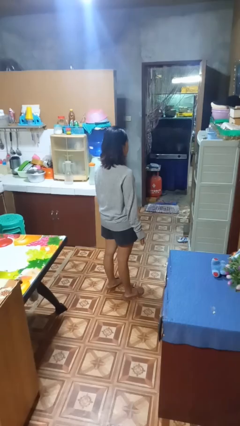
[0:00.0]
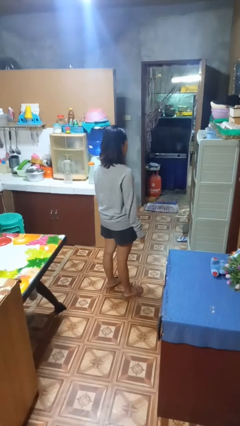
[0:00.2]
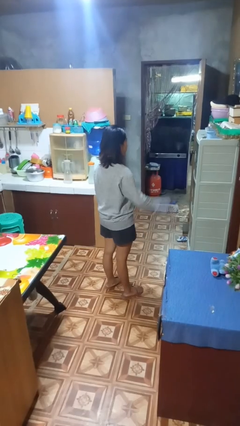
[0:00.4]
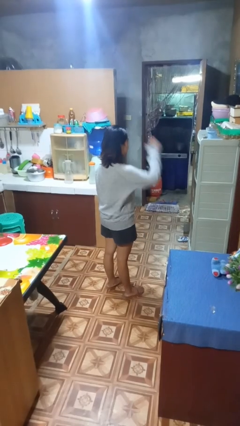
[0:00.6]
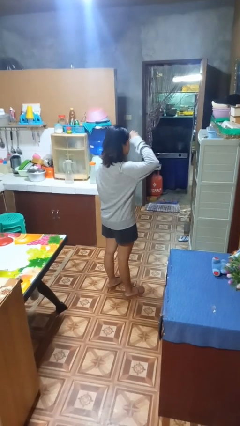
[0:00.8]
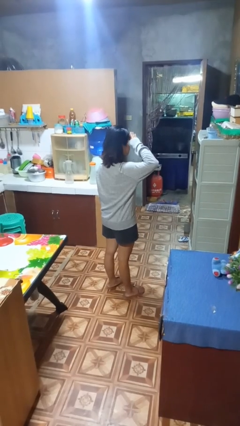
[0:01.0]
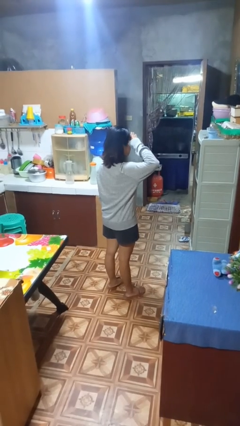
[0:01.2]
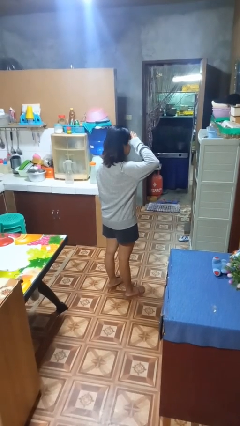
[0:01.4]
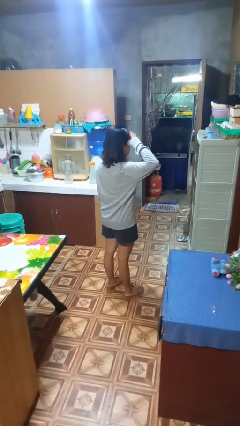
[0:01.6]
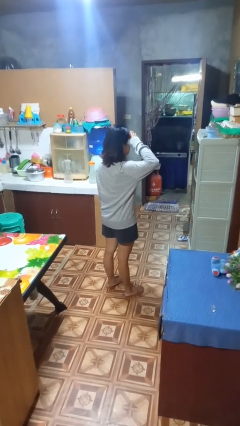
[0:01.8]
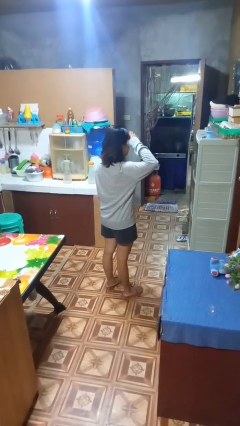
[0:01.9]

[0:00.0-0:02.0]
person salutes

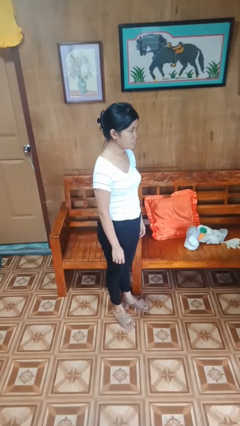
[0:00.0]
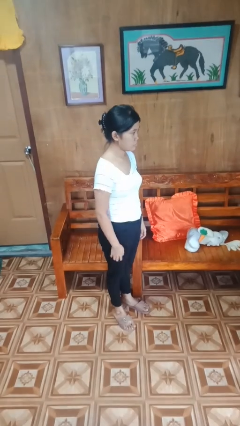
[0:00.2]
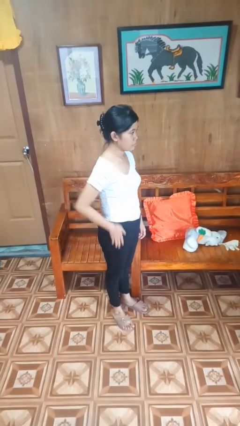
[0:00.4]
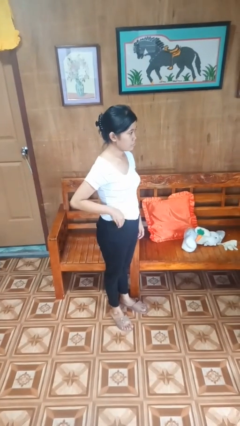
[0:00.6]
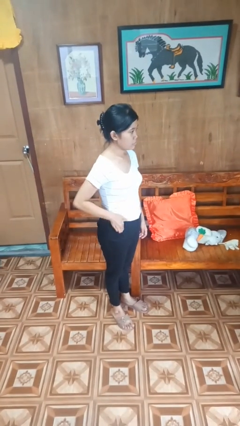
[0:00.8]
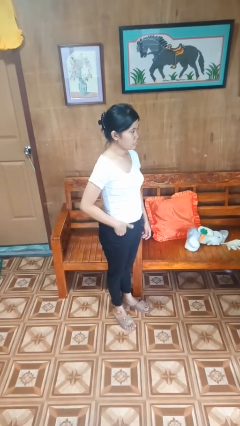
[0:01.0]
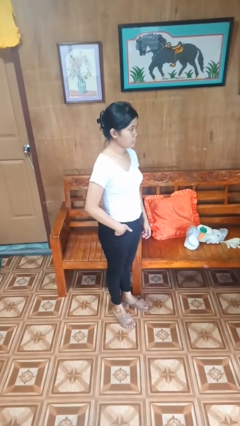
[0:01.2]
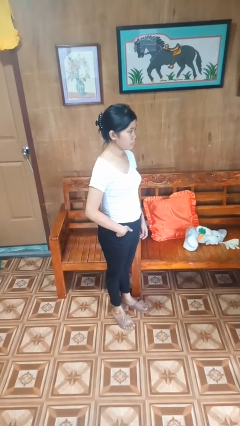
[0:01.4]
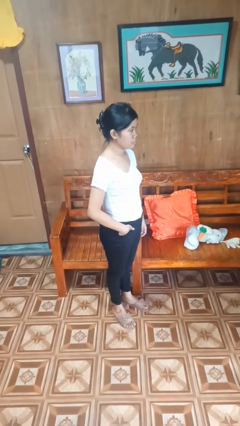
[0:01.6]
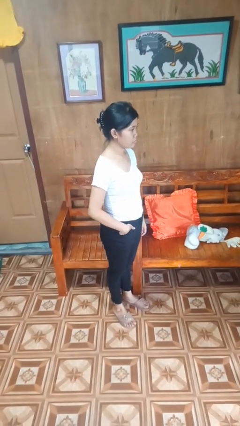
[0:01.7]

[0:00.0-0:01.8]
person puts hands in back pockets

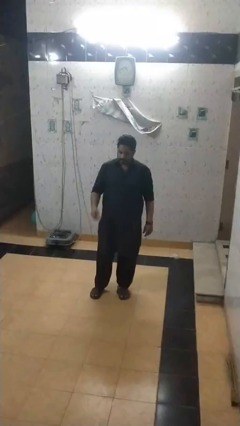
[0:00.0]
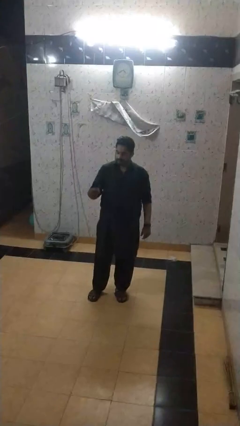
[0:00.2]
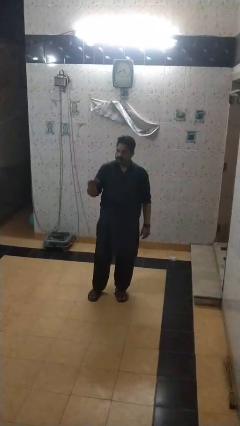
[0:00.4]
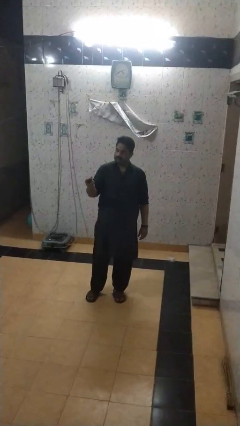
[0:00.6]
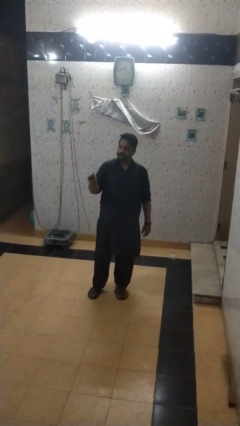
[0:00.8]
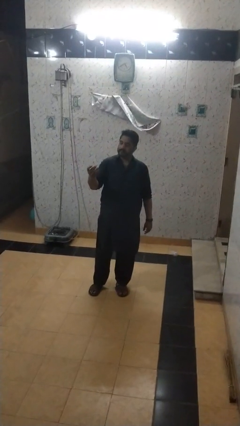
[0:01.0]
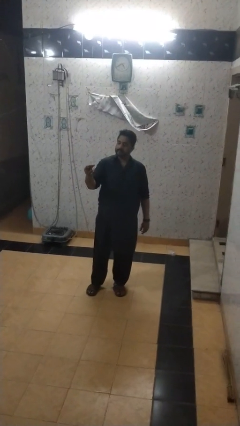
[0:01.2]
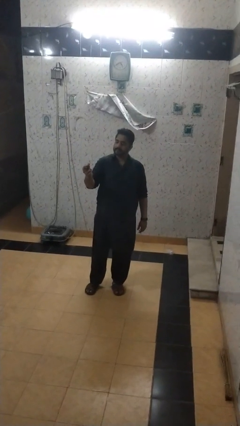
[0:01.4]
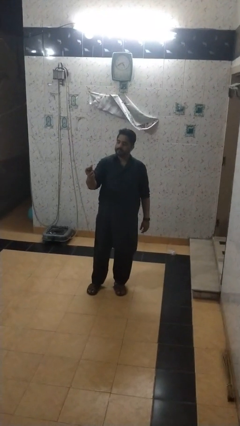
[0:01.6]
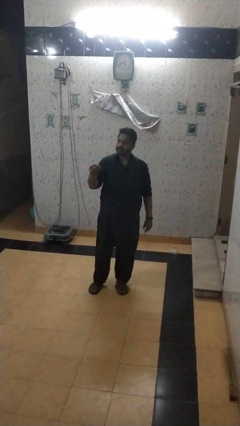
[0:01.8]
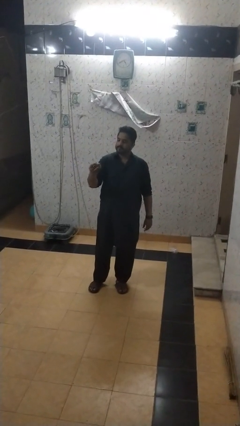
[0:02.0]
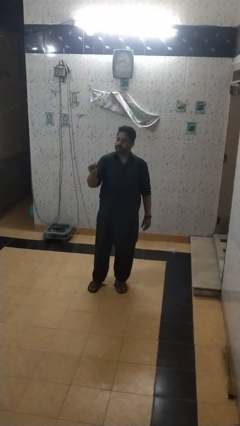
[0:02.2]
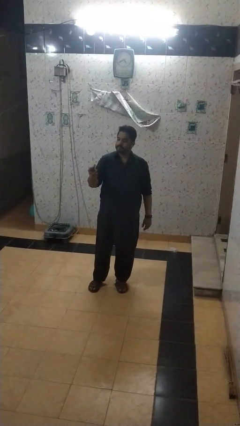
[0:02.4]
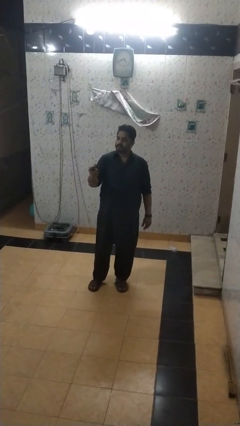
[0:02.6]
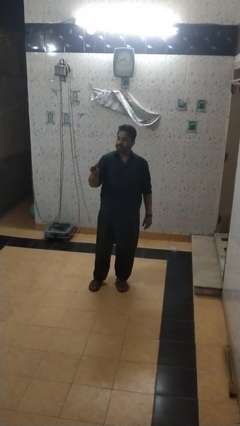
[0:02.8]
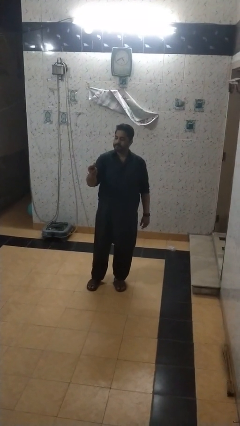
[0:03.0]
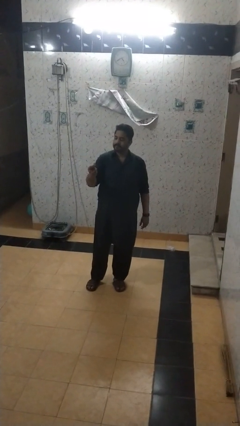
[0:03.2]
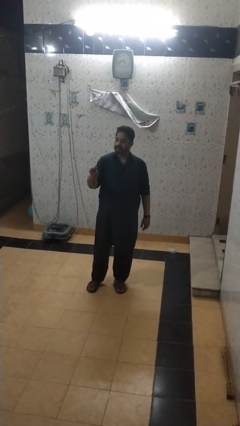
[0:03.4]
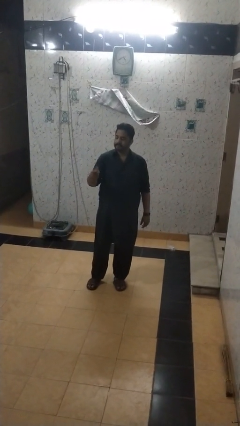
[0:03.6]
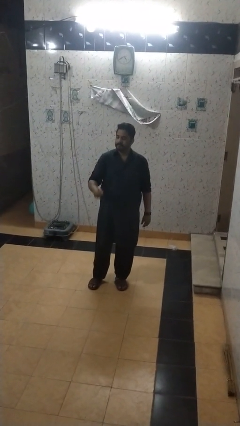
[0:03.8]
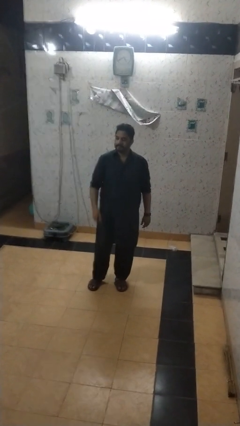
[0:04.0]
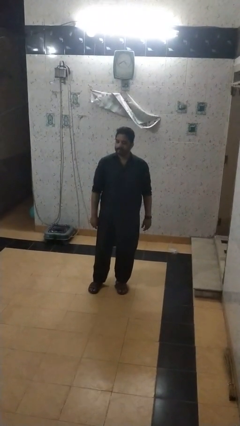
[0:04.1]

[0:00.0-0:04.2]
person snaps fingers

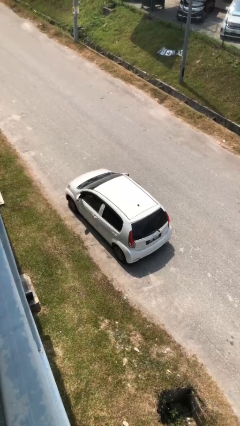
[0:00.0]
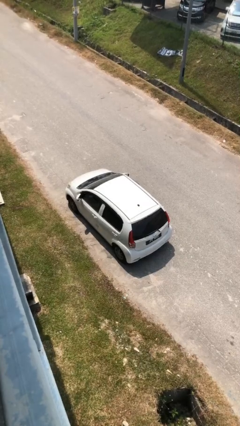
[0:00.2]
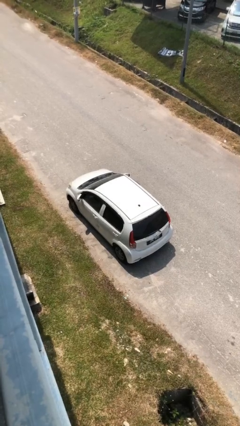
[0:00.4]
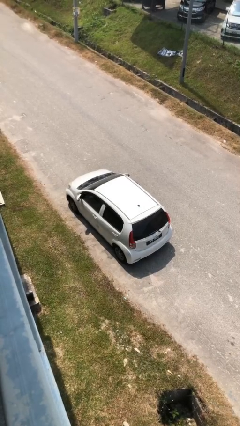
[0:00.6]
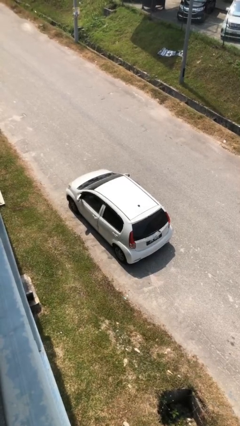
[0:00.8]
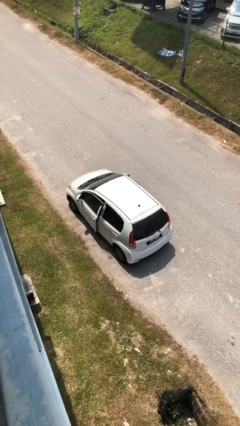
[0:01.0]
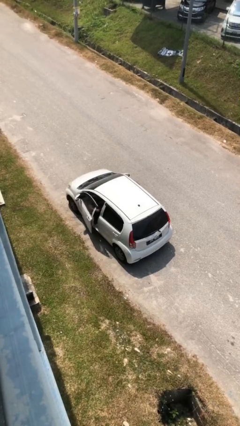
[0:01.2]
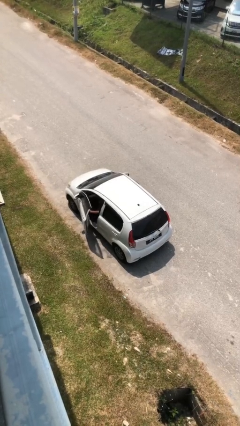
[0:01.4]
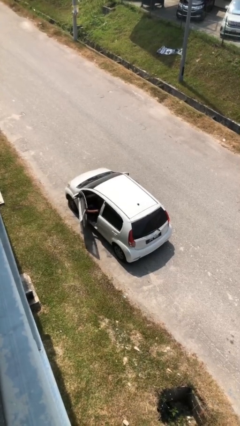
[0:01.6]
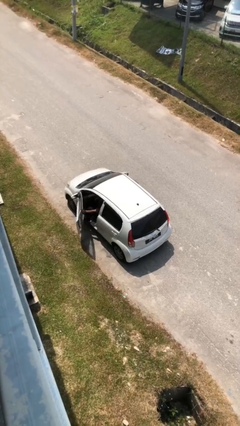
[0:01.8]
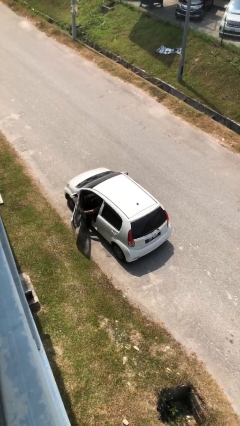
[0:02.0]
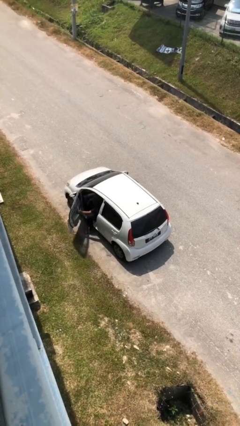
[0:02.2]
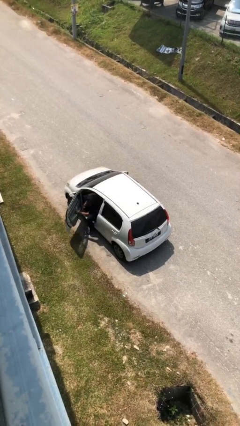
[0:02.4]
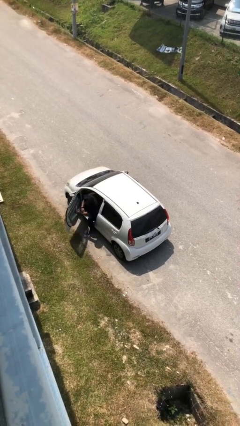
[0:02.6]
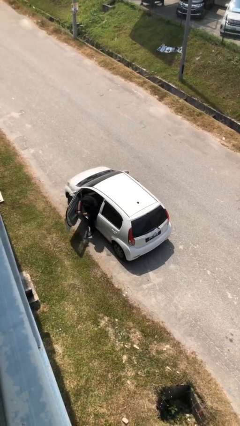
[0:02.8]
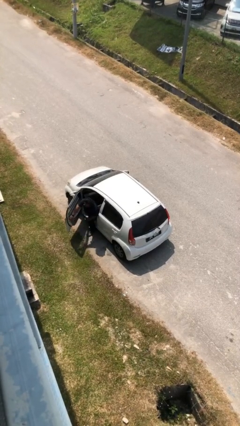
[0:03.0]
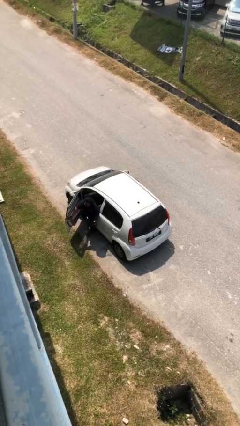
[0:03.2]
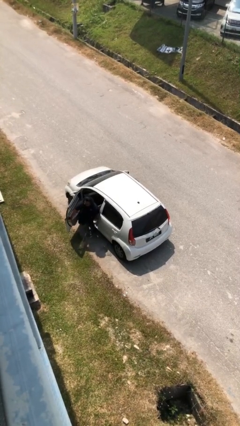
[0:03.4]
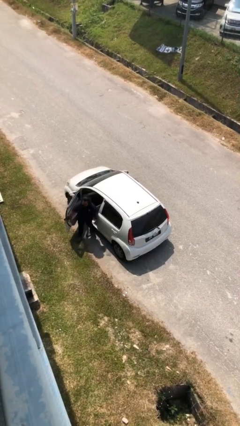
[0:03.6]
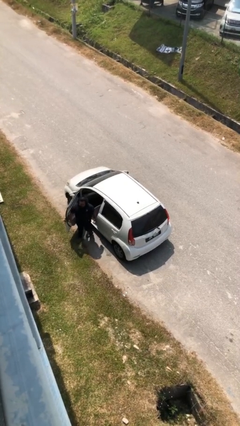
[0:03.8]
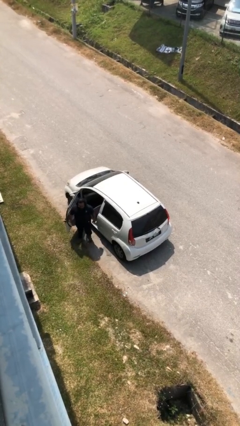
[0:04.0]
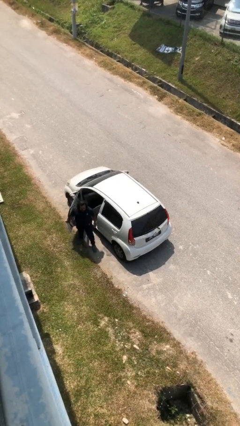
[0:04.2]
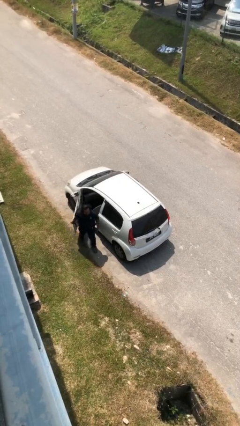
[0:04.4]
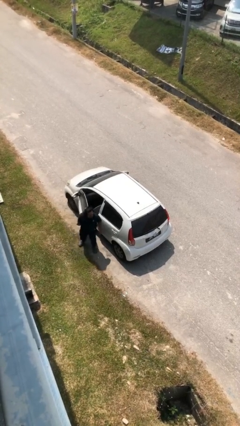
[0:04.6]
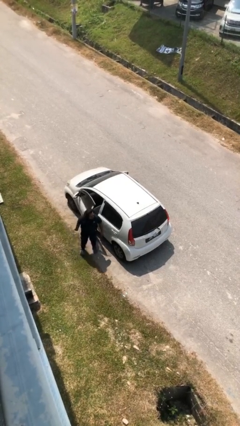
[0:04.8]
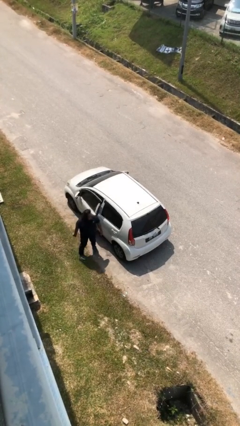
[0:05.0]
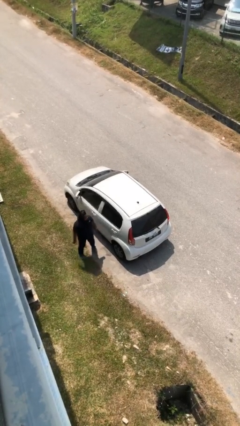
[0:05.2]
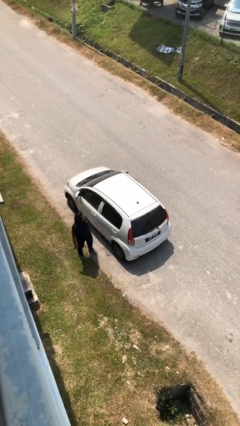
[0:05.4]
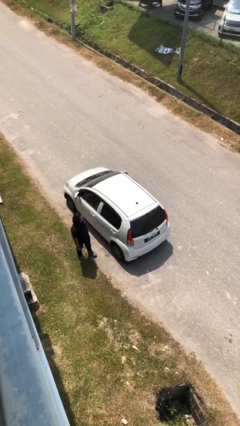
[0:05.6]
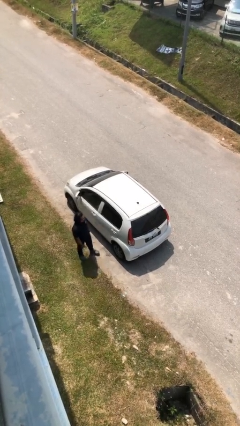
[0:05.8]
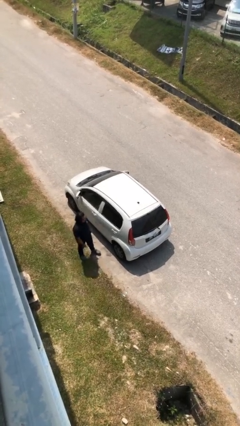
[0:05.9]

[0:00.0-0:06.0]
car drops off person

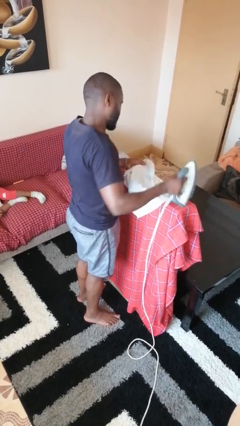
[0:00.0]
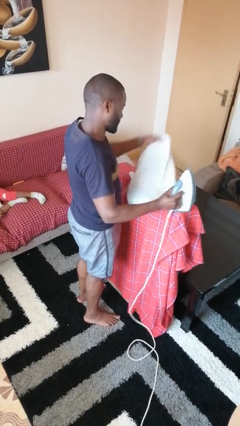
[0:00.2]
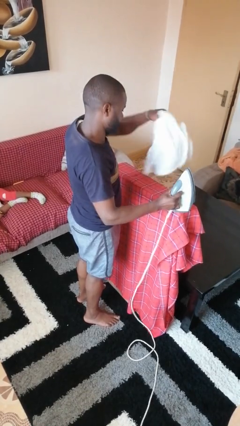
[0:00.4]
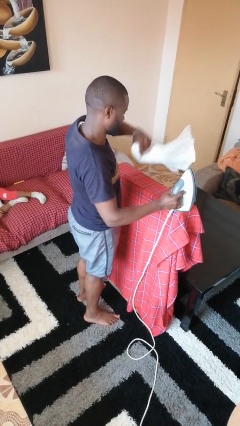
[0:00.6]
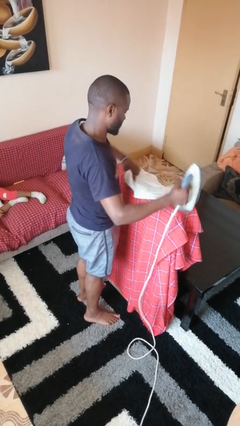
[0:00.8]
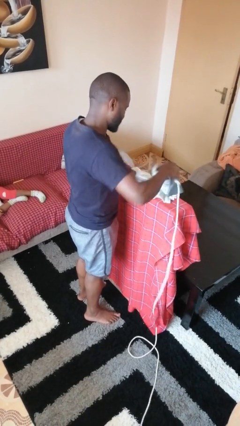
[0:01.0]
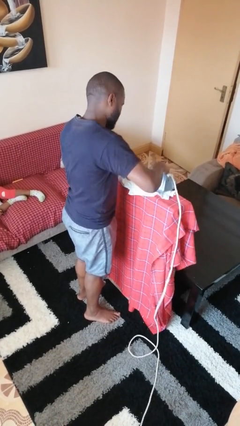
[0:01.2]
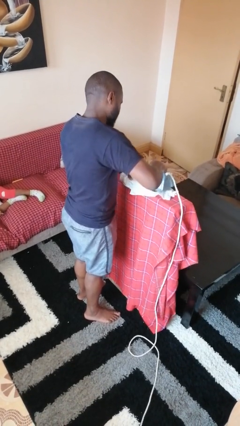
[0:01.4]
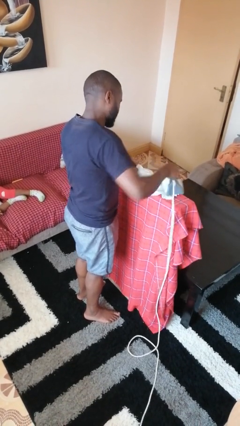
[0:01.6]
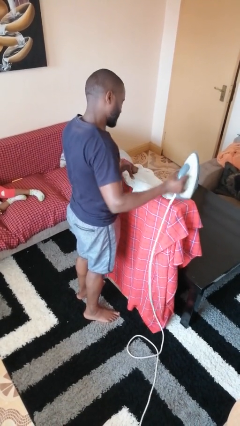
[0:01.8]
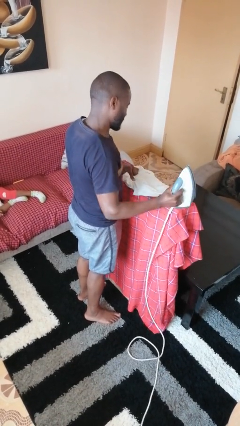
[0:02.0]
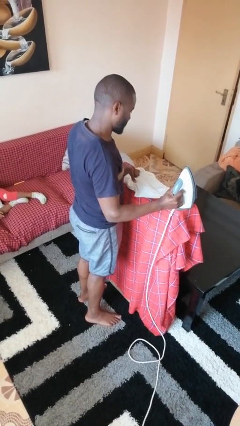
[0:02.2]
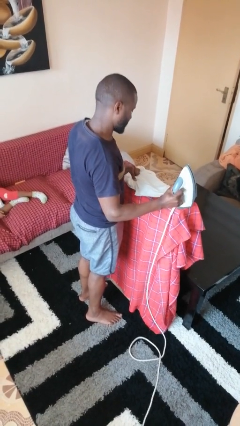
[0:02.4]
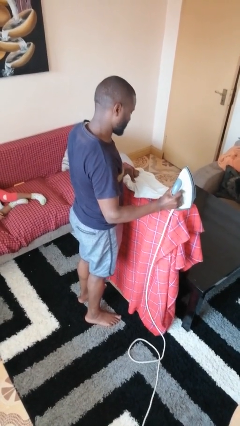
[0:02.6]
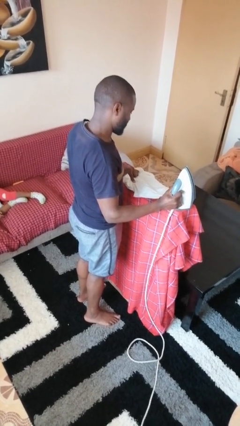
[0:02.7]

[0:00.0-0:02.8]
person irons clothes

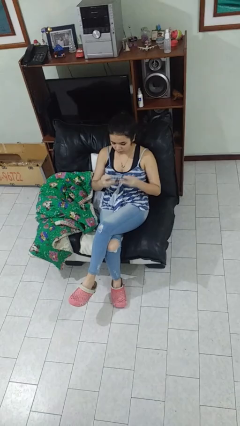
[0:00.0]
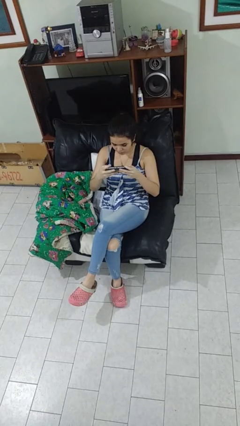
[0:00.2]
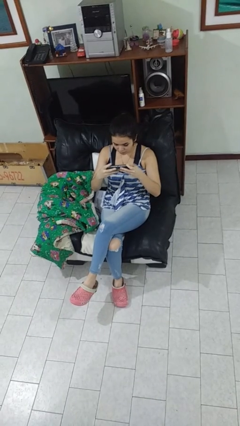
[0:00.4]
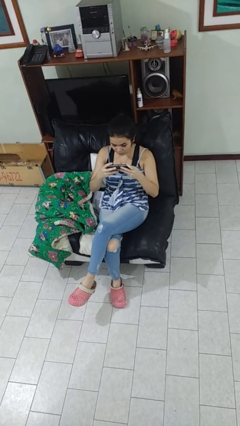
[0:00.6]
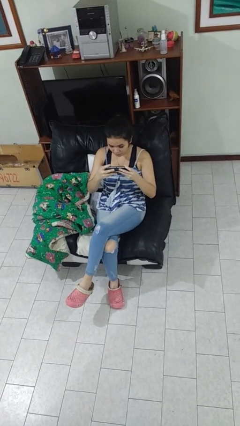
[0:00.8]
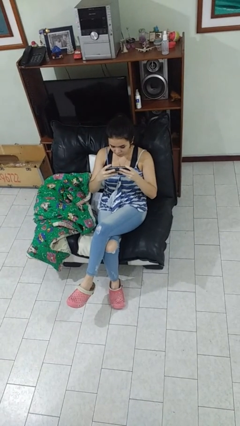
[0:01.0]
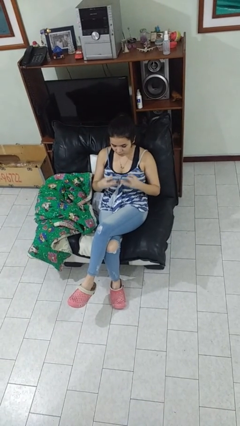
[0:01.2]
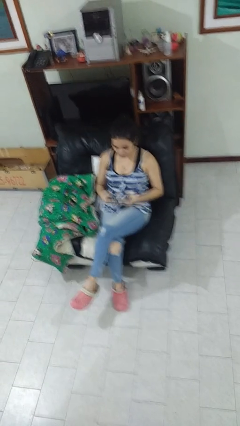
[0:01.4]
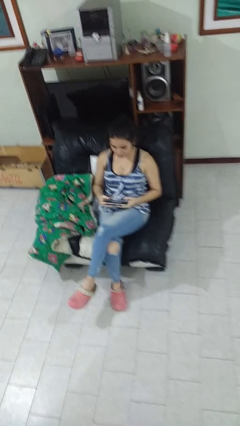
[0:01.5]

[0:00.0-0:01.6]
person interacts with handheld game
